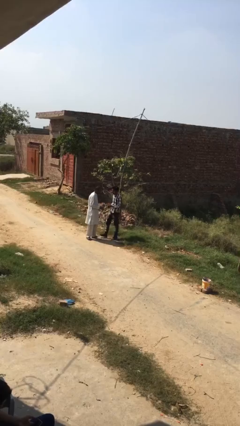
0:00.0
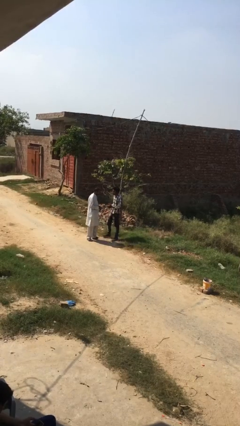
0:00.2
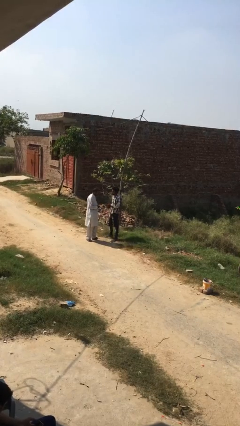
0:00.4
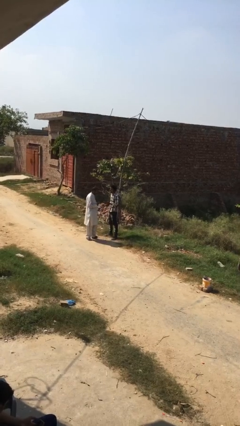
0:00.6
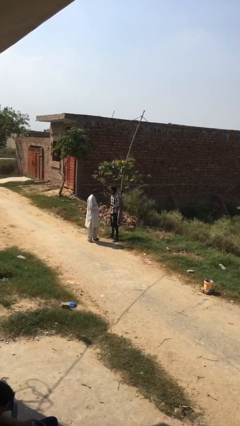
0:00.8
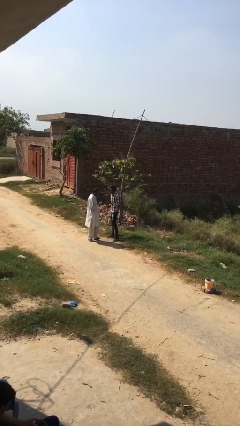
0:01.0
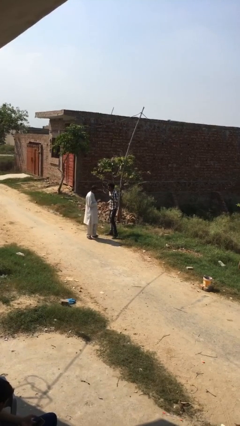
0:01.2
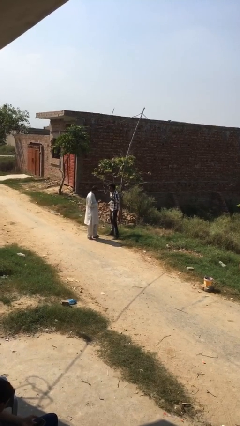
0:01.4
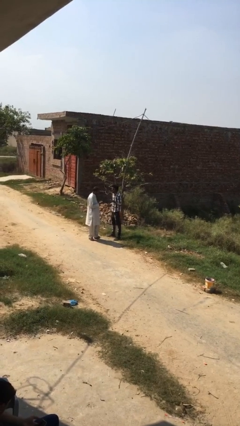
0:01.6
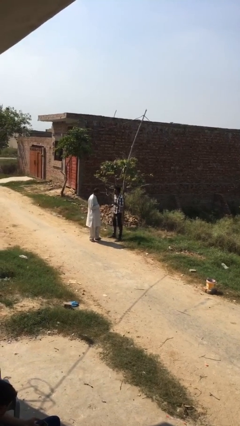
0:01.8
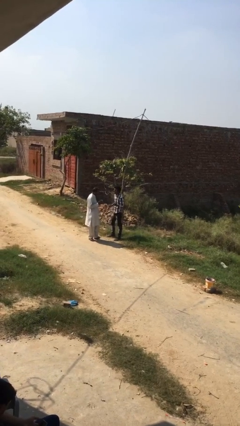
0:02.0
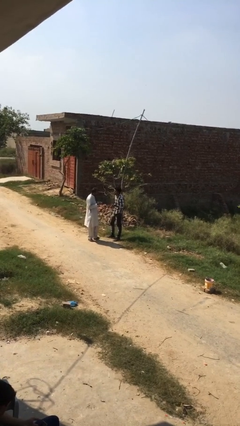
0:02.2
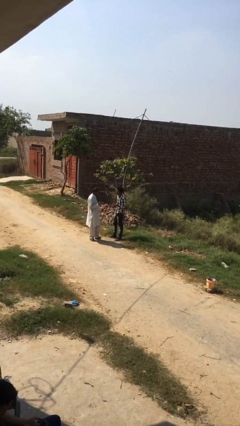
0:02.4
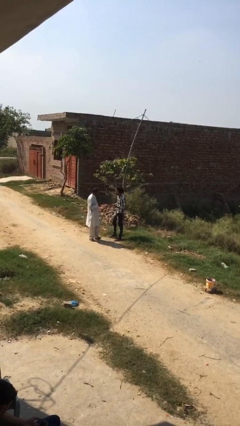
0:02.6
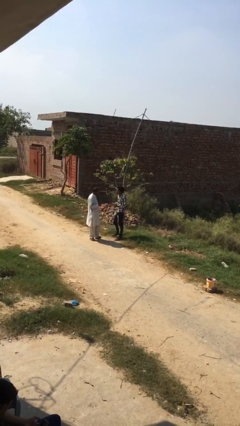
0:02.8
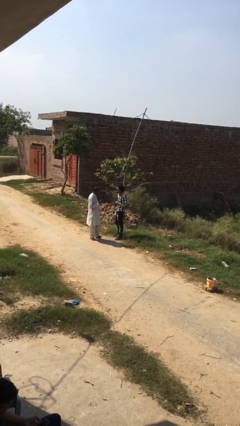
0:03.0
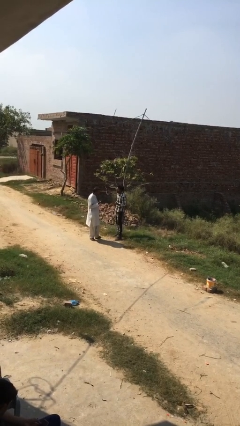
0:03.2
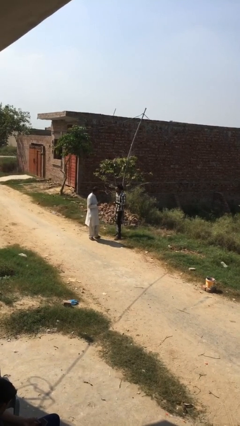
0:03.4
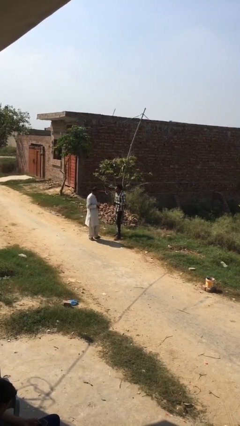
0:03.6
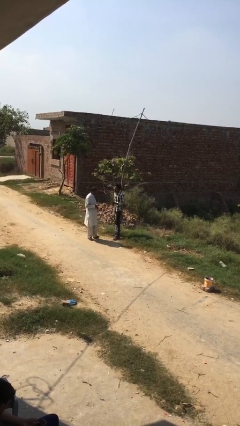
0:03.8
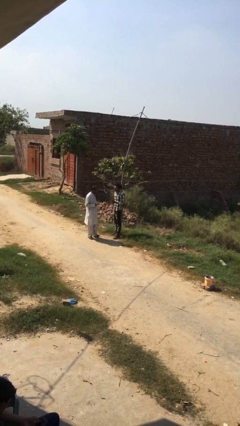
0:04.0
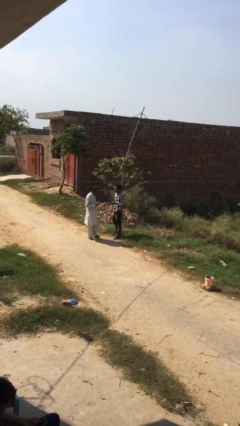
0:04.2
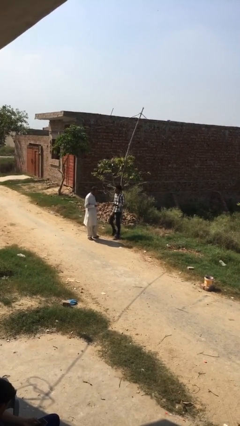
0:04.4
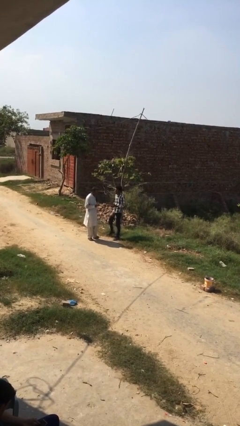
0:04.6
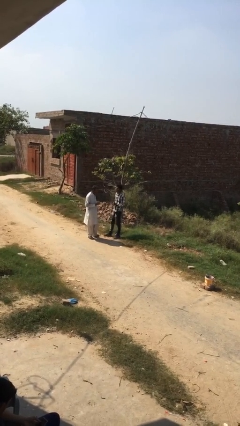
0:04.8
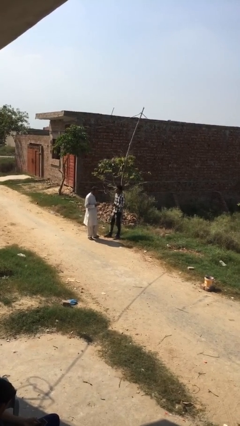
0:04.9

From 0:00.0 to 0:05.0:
person talks to person

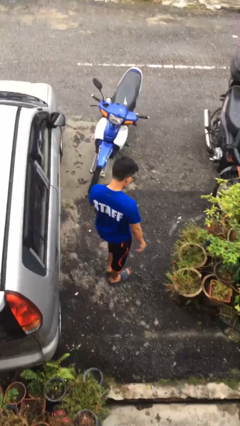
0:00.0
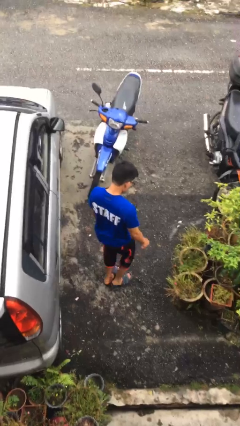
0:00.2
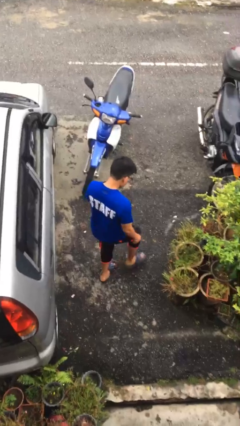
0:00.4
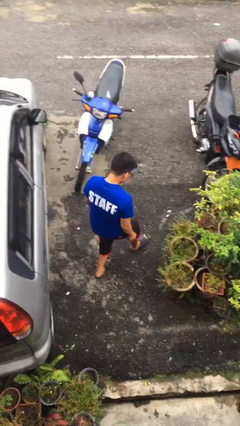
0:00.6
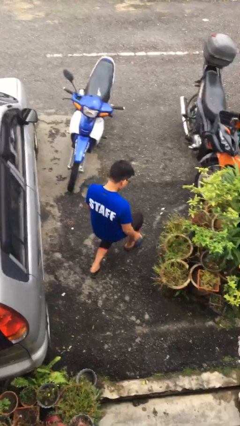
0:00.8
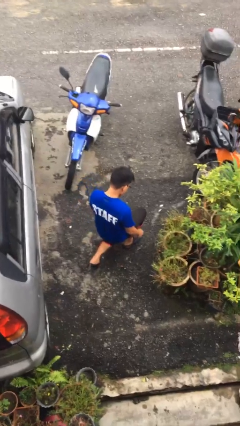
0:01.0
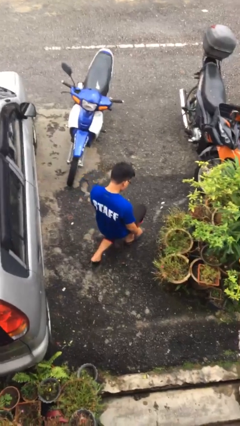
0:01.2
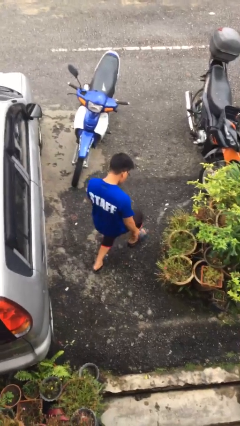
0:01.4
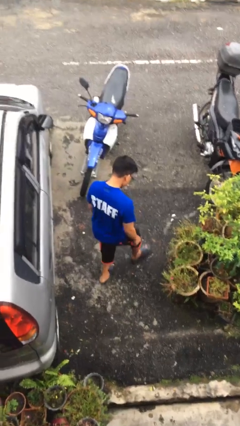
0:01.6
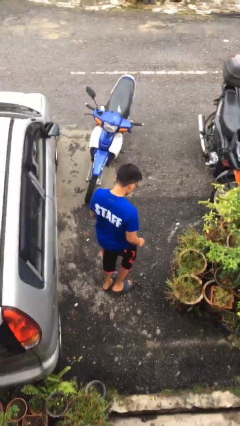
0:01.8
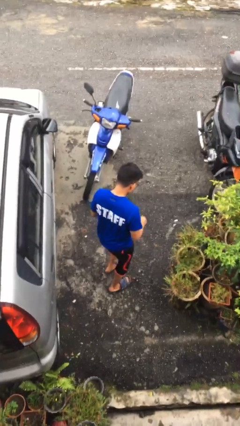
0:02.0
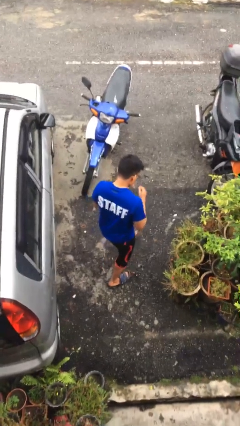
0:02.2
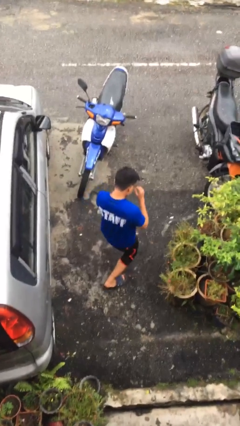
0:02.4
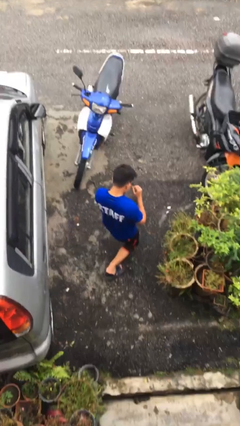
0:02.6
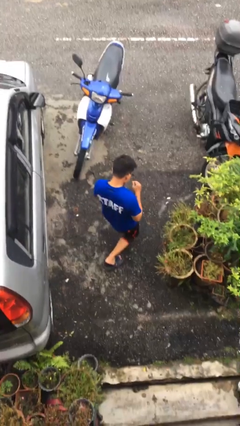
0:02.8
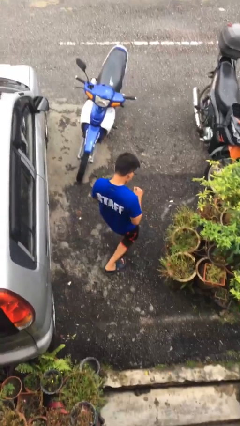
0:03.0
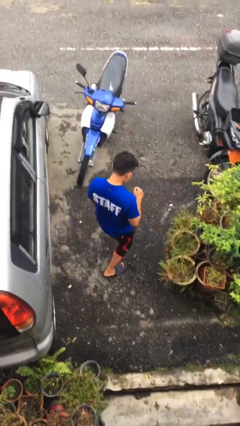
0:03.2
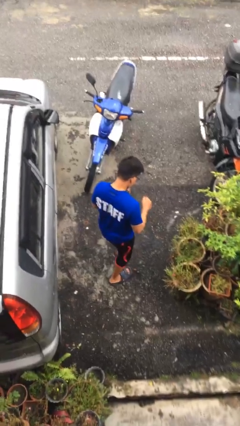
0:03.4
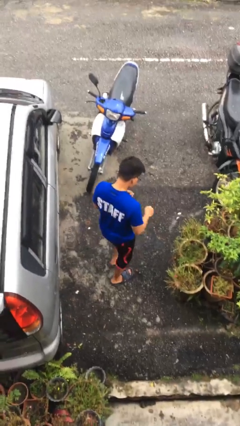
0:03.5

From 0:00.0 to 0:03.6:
person exercises with lunges

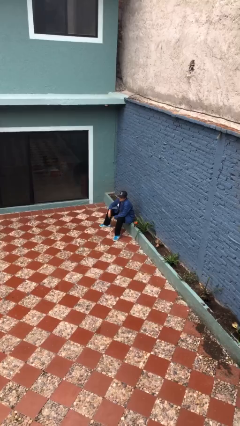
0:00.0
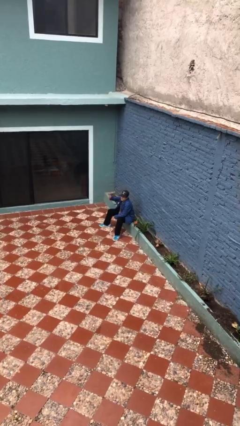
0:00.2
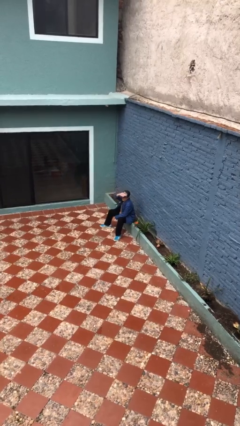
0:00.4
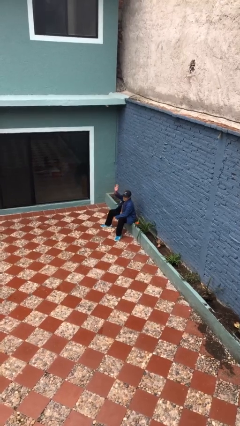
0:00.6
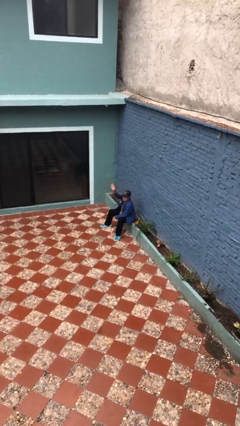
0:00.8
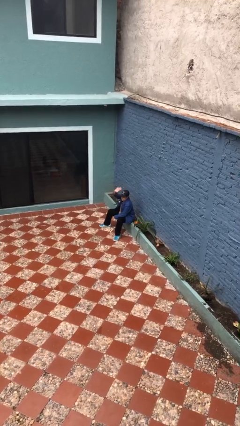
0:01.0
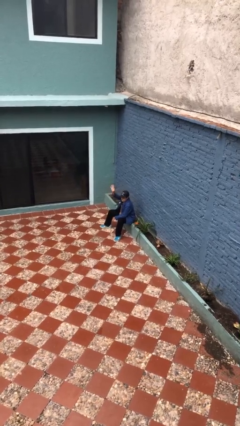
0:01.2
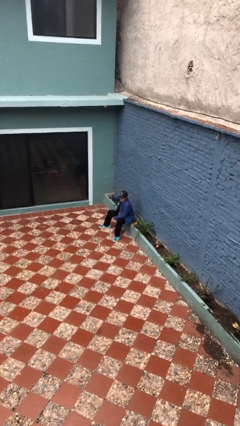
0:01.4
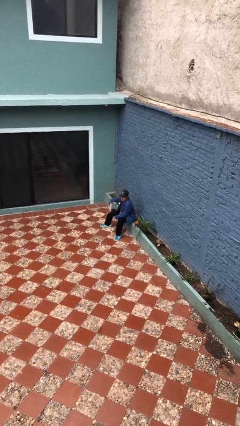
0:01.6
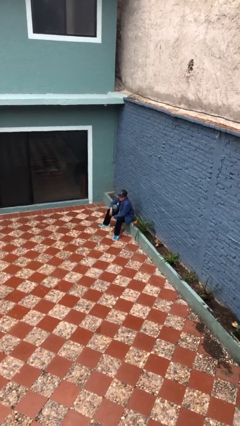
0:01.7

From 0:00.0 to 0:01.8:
person waves at person

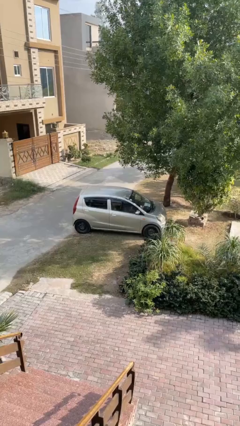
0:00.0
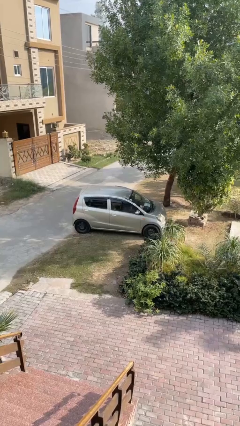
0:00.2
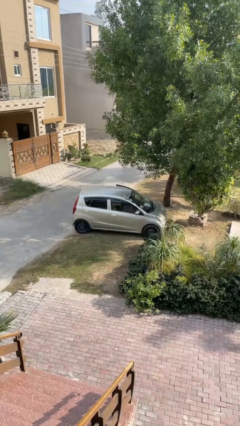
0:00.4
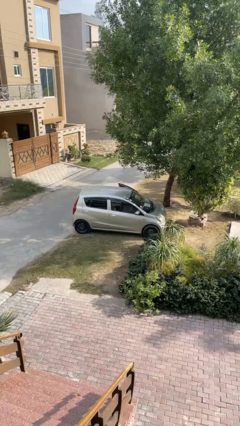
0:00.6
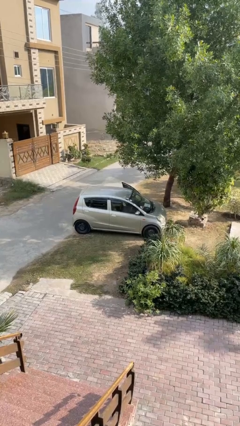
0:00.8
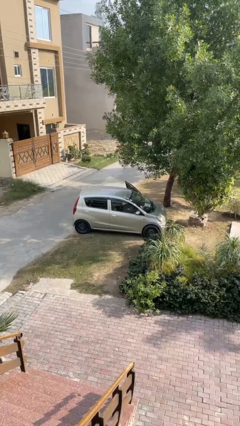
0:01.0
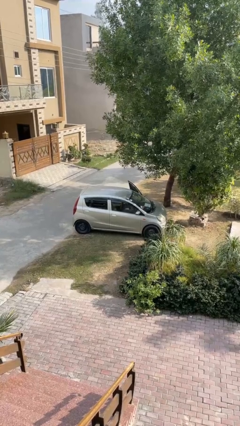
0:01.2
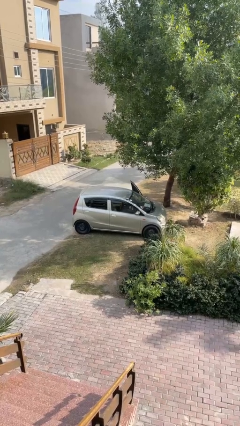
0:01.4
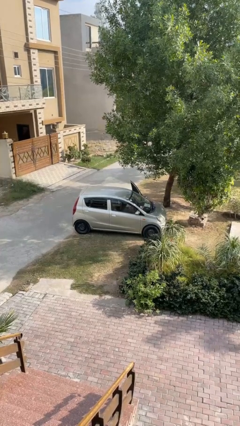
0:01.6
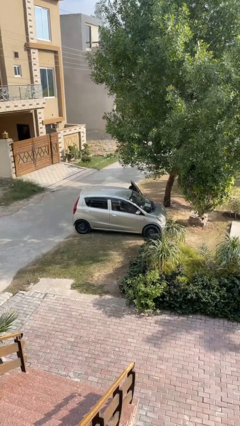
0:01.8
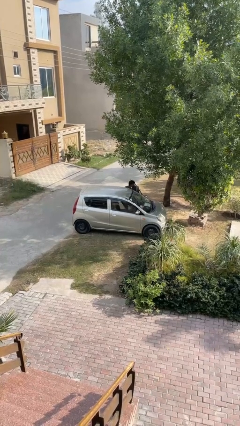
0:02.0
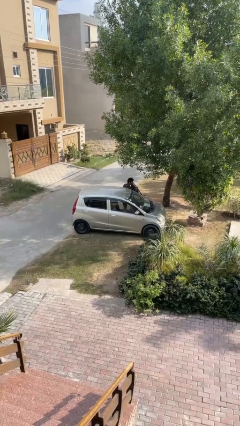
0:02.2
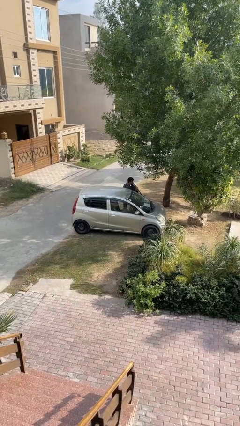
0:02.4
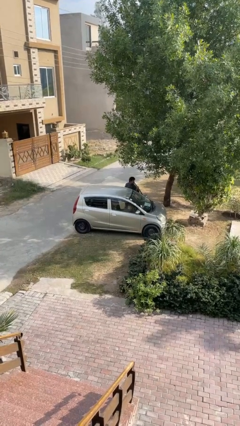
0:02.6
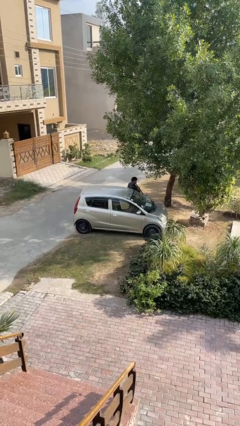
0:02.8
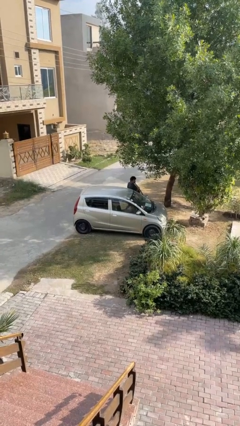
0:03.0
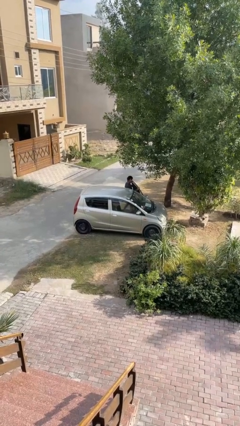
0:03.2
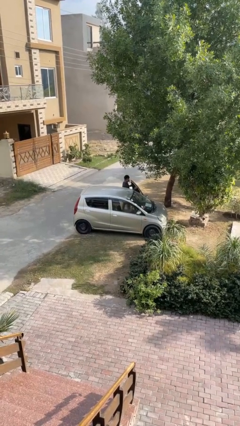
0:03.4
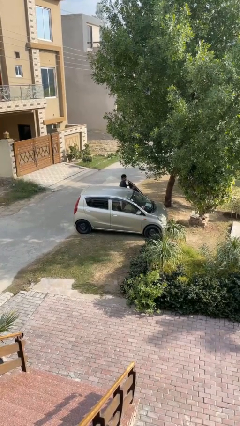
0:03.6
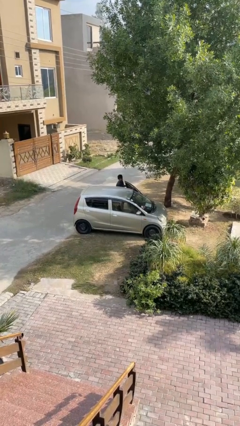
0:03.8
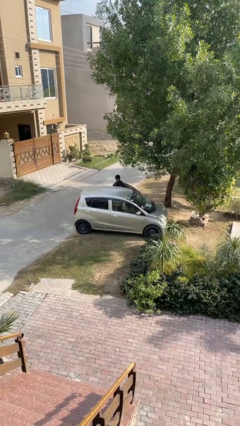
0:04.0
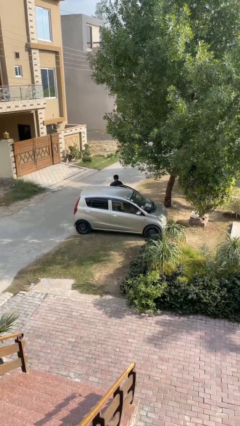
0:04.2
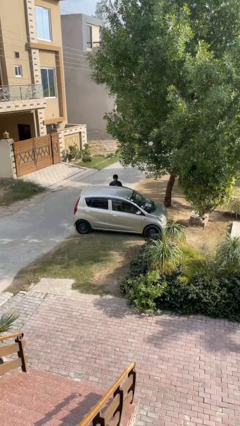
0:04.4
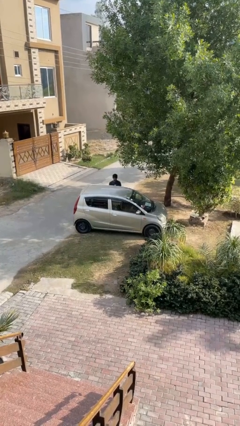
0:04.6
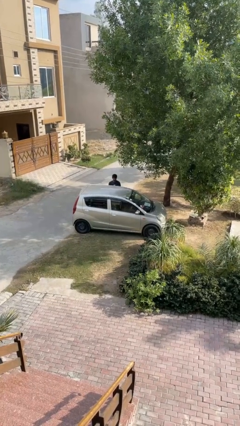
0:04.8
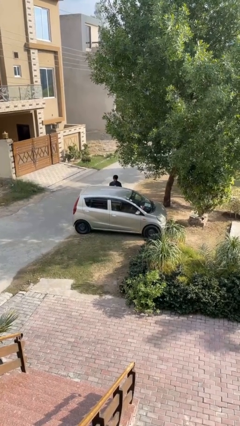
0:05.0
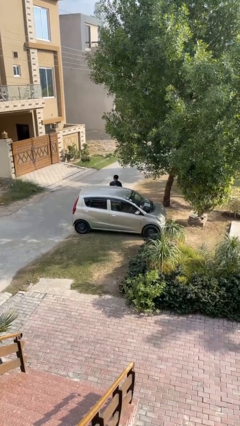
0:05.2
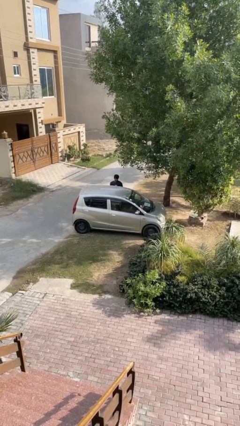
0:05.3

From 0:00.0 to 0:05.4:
car drops off person

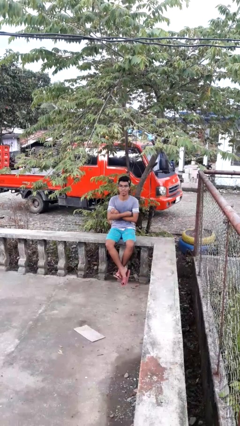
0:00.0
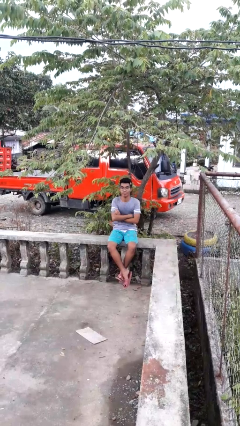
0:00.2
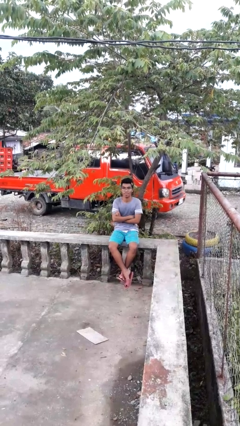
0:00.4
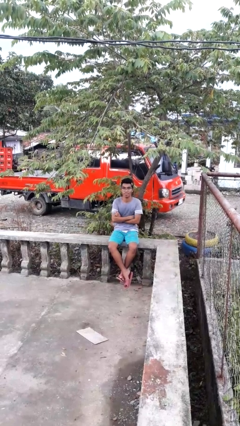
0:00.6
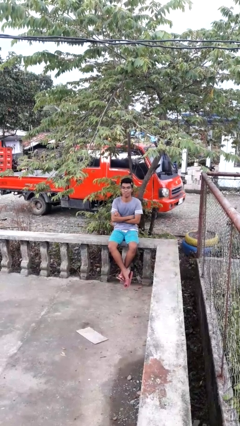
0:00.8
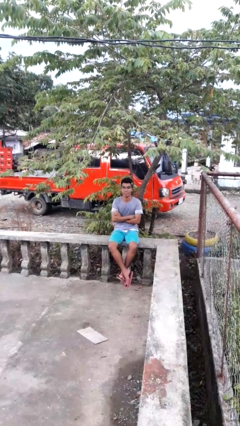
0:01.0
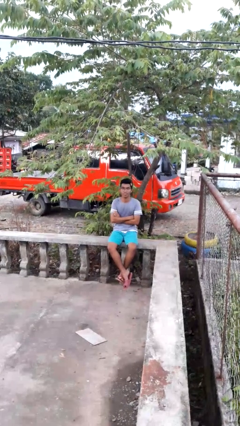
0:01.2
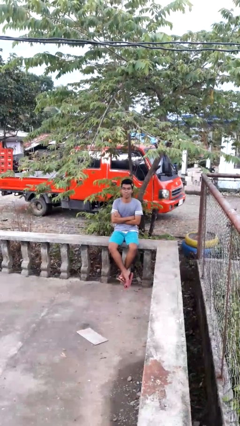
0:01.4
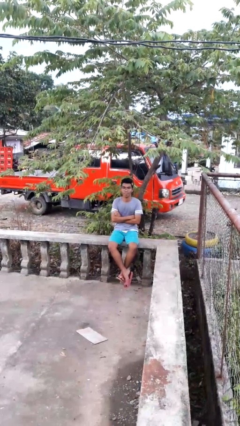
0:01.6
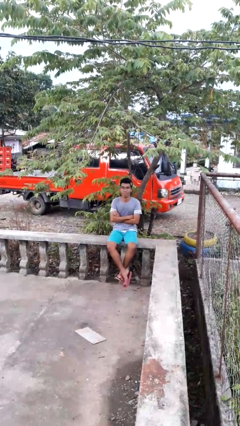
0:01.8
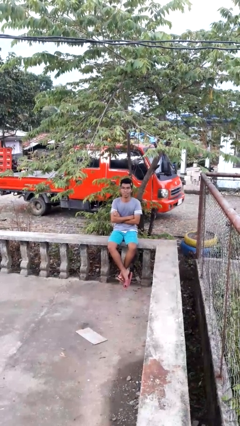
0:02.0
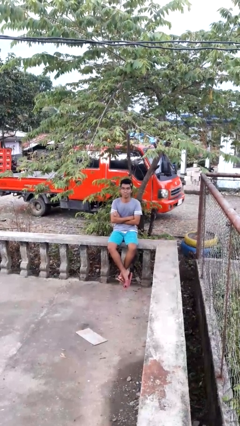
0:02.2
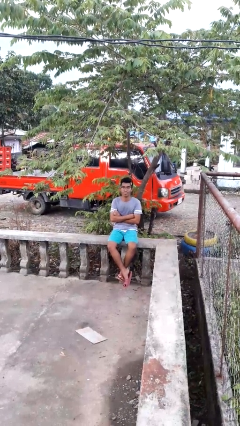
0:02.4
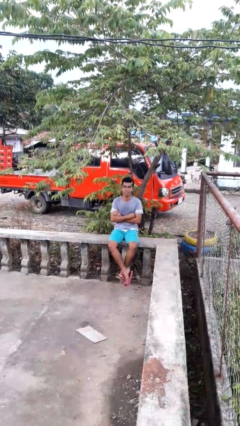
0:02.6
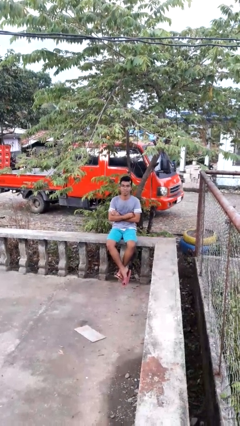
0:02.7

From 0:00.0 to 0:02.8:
person crosses arms
